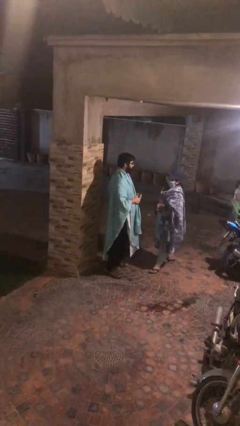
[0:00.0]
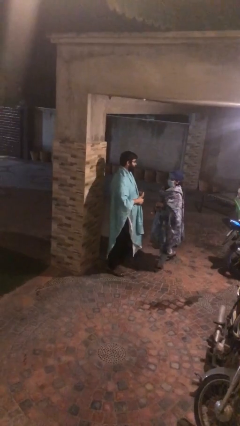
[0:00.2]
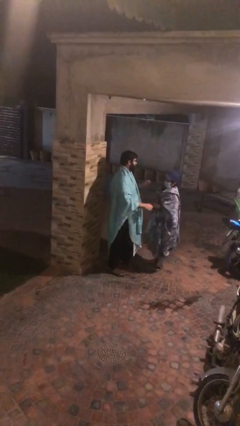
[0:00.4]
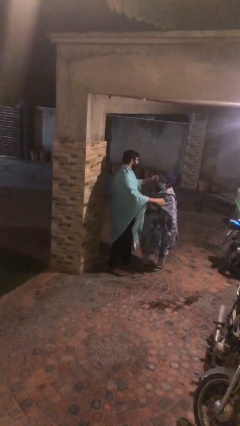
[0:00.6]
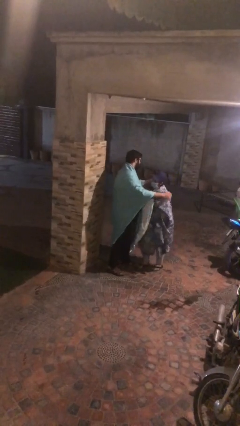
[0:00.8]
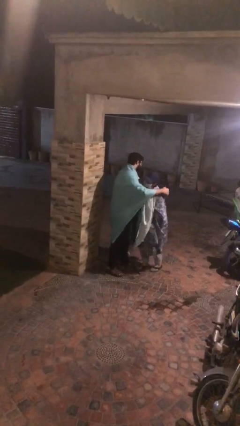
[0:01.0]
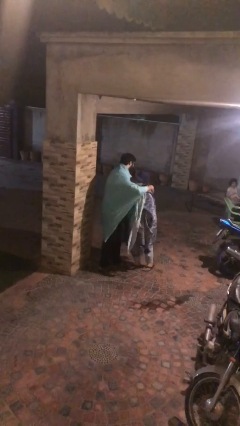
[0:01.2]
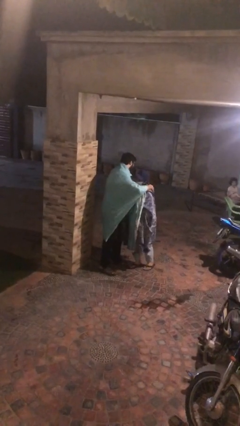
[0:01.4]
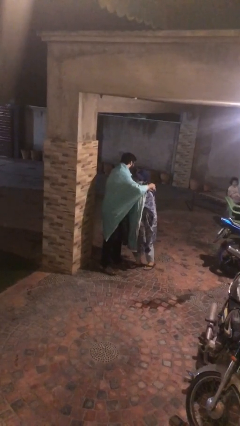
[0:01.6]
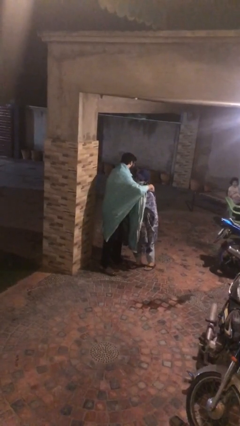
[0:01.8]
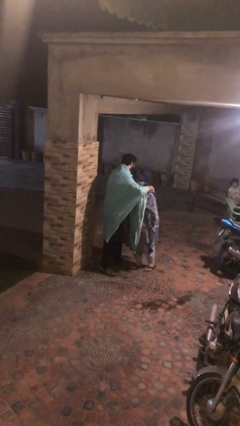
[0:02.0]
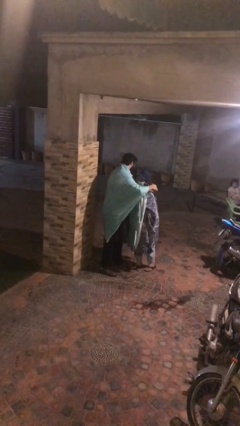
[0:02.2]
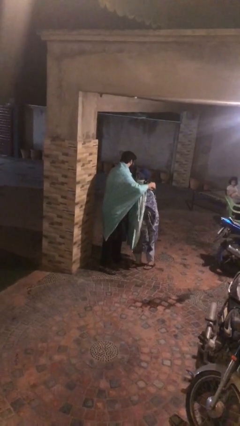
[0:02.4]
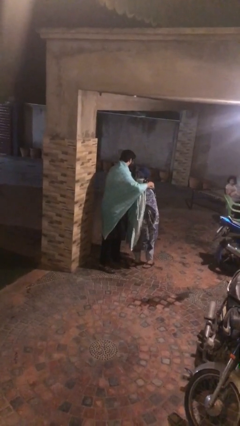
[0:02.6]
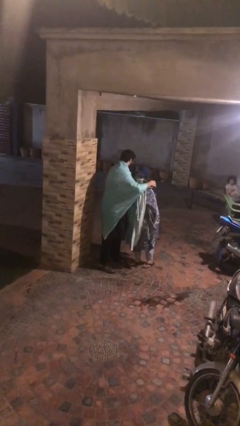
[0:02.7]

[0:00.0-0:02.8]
person embraces person

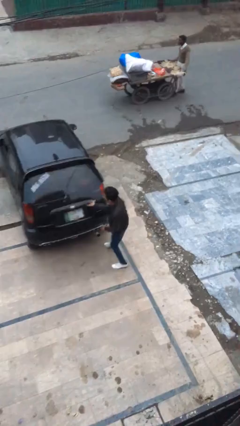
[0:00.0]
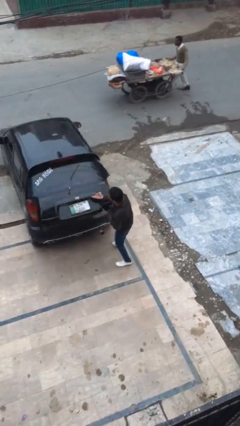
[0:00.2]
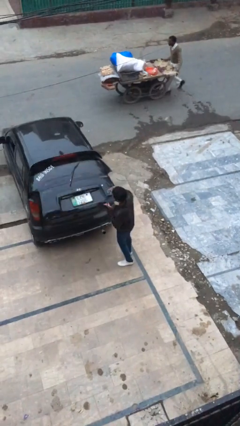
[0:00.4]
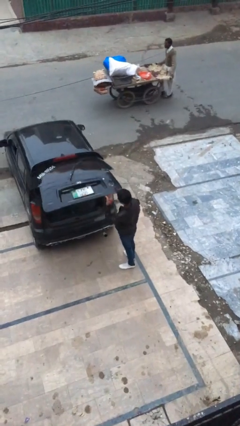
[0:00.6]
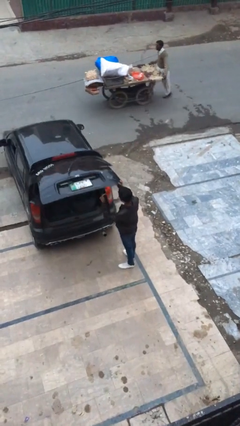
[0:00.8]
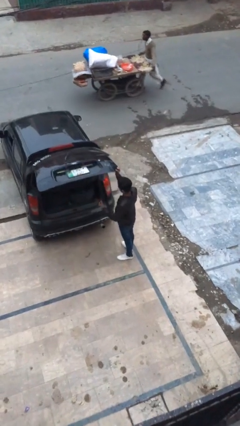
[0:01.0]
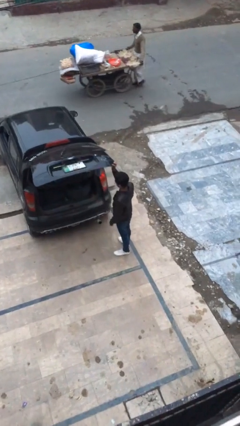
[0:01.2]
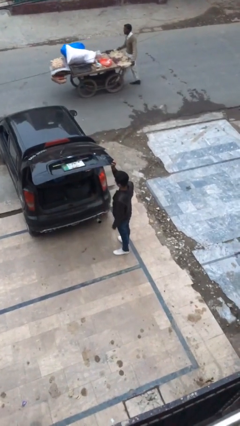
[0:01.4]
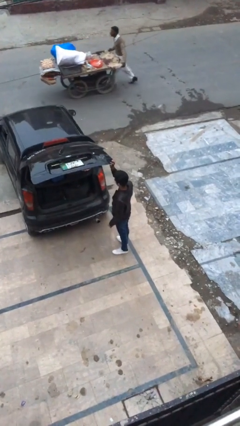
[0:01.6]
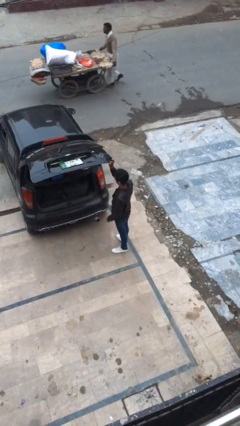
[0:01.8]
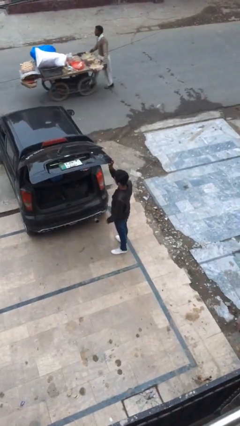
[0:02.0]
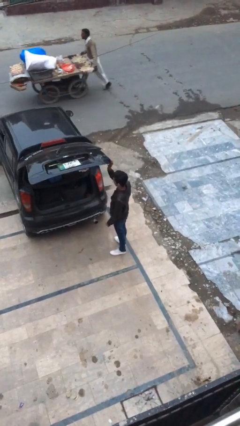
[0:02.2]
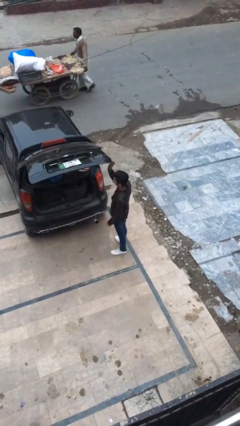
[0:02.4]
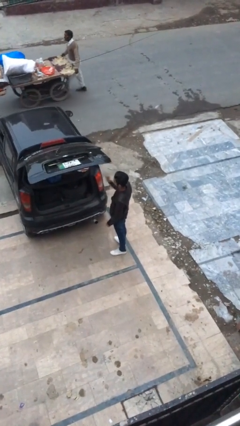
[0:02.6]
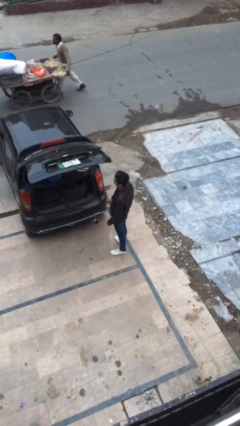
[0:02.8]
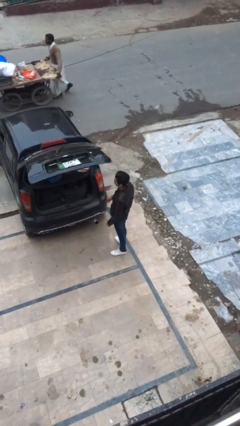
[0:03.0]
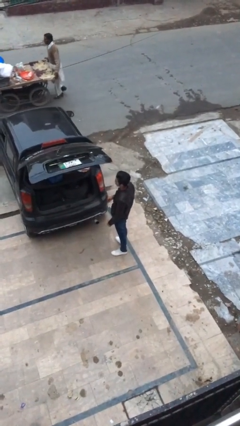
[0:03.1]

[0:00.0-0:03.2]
person opens car trunk

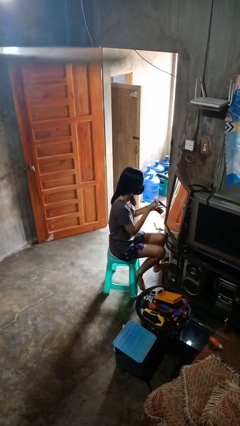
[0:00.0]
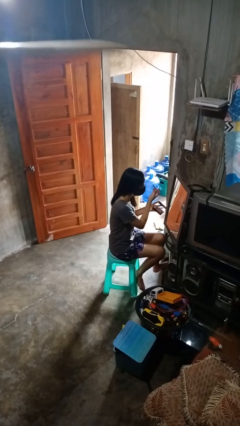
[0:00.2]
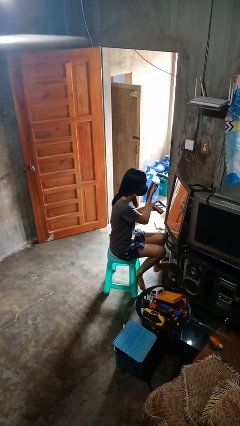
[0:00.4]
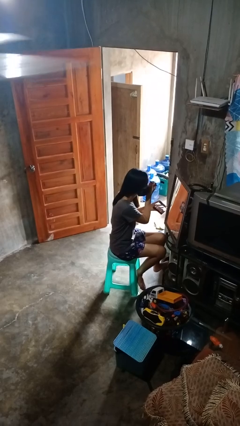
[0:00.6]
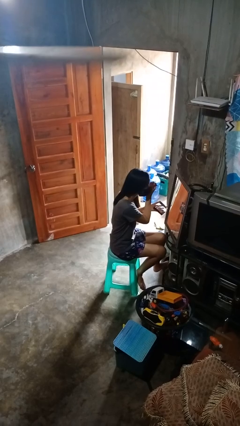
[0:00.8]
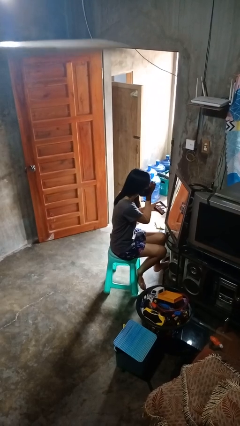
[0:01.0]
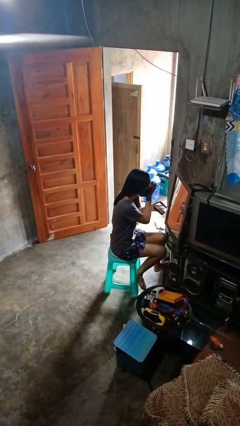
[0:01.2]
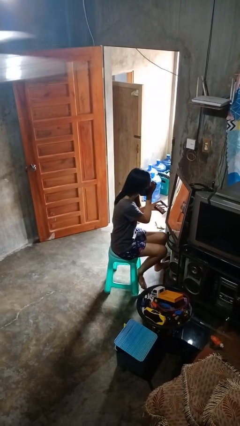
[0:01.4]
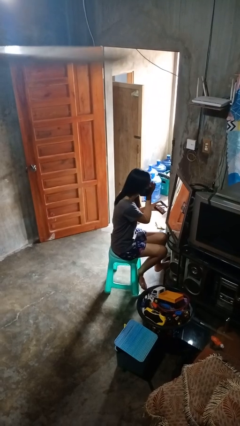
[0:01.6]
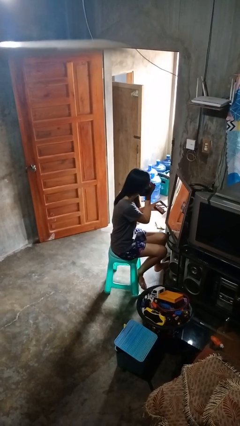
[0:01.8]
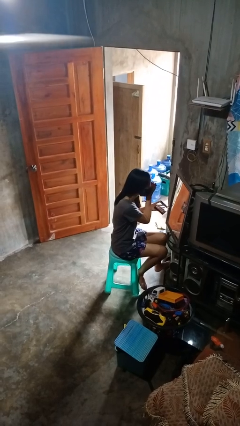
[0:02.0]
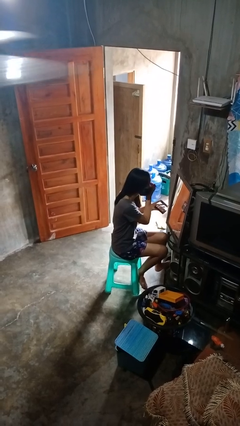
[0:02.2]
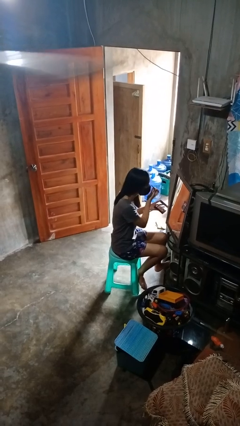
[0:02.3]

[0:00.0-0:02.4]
person applies eye makeup

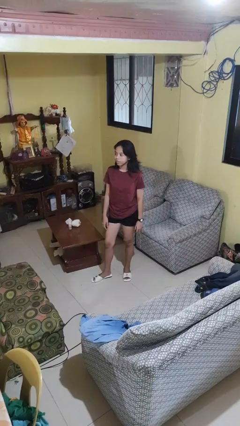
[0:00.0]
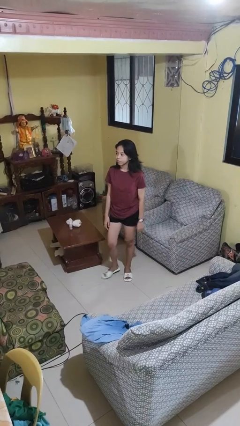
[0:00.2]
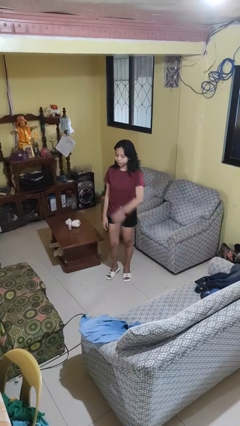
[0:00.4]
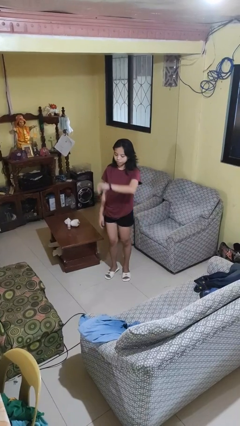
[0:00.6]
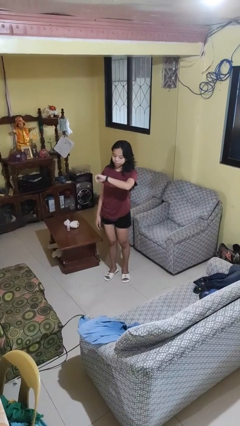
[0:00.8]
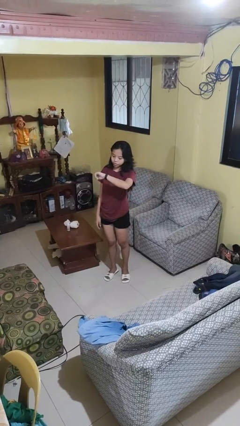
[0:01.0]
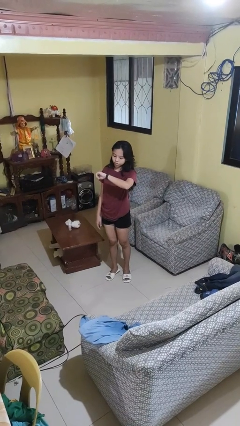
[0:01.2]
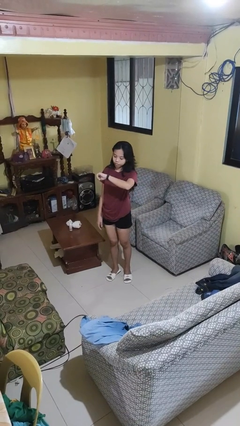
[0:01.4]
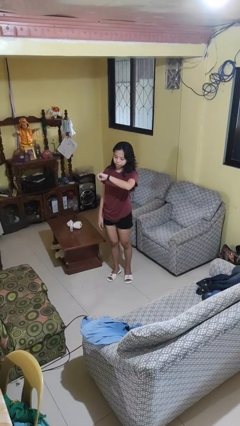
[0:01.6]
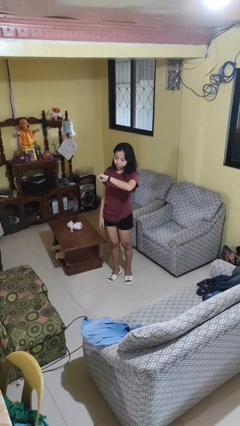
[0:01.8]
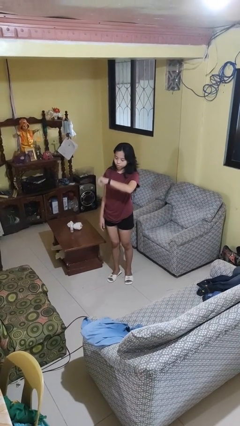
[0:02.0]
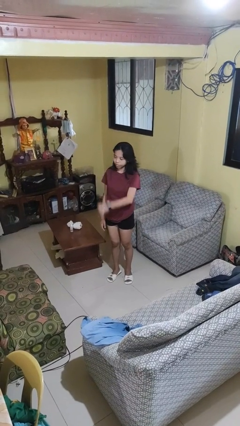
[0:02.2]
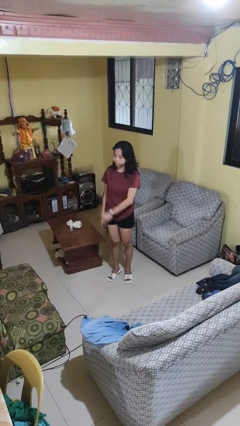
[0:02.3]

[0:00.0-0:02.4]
person looks at wristwatch

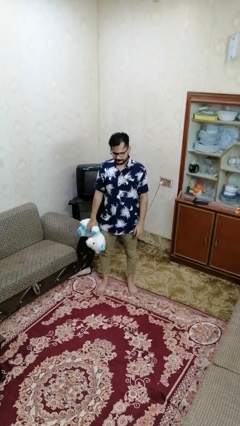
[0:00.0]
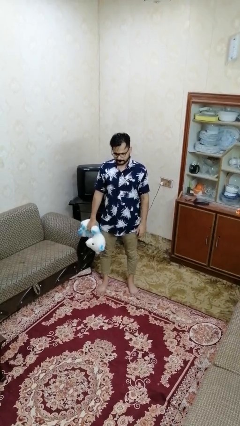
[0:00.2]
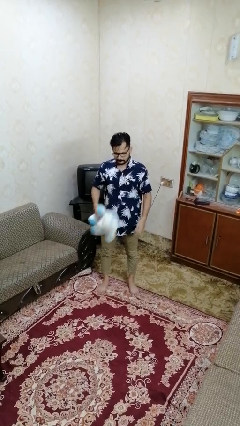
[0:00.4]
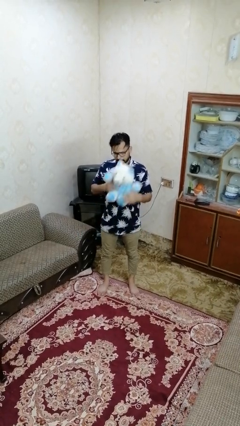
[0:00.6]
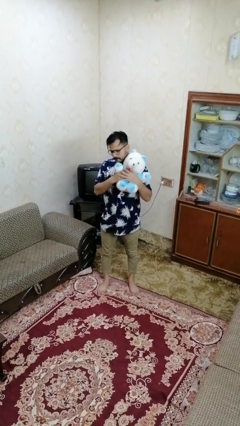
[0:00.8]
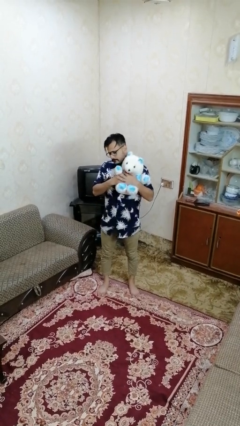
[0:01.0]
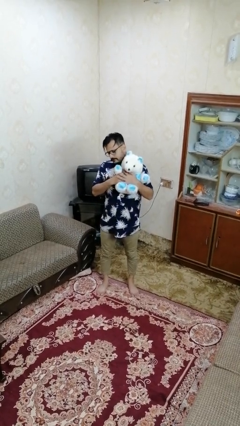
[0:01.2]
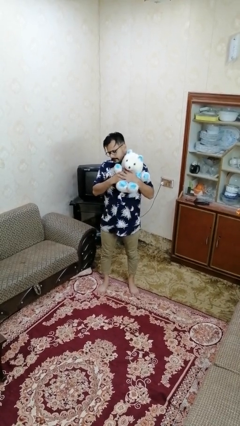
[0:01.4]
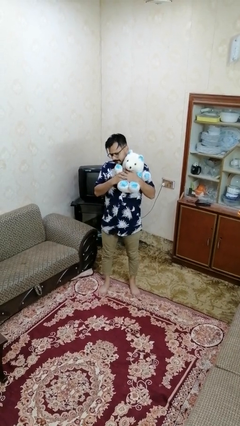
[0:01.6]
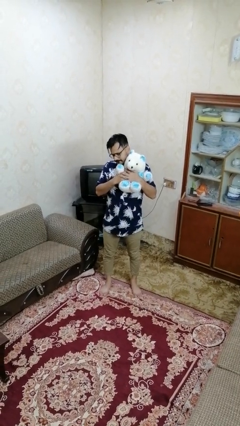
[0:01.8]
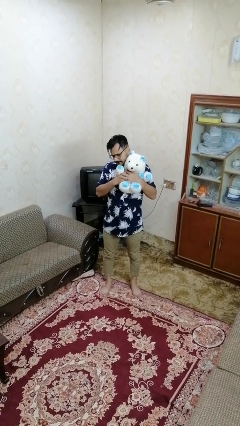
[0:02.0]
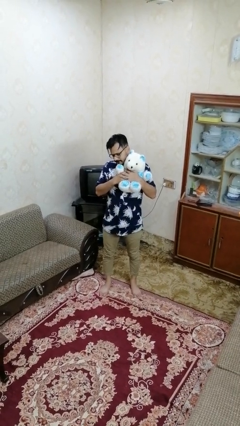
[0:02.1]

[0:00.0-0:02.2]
person hugs stuffed animal

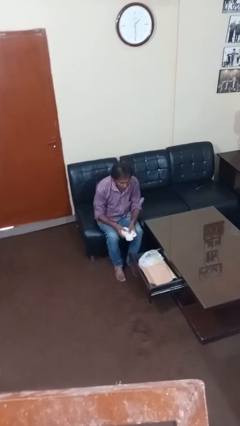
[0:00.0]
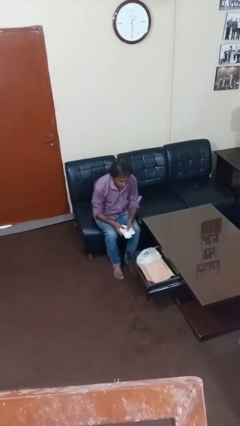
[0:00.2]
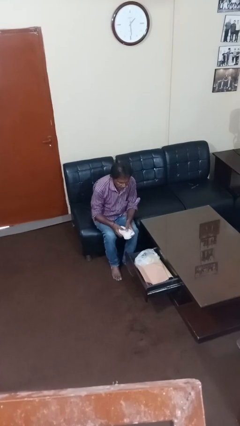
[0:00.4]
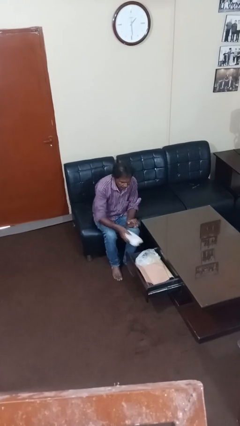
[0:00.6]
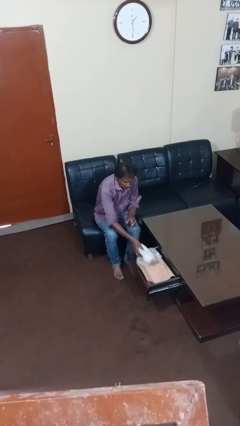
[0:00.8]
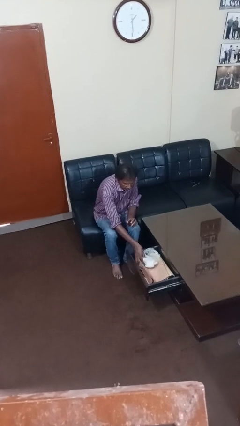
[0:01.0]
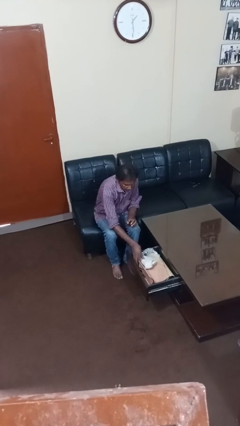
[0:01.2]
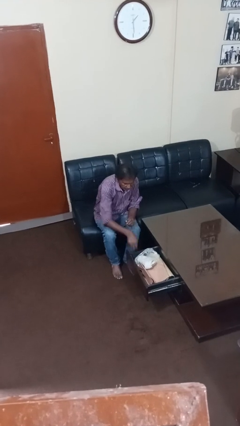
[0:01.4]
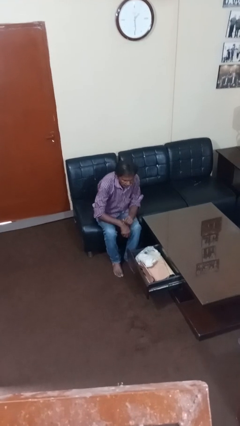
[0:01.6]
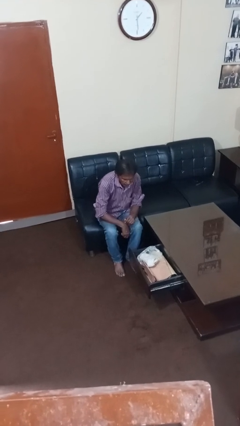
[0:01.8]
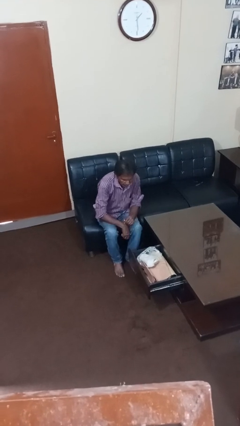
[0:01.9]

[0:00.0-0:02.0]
person puts clothes into dresser

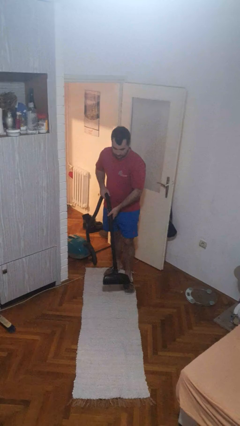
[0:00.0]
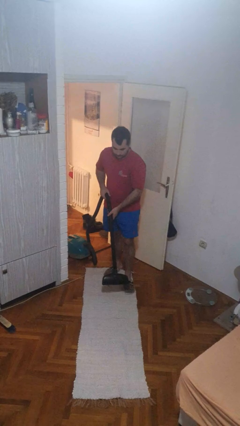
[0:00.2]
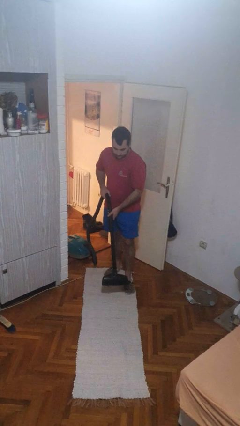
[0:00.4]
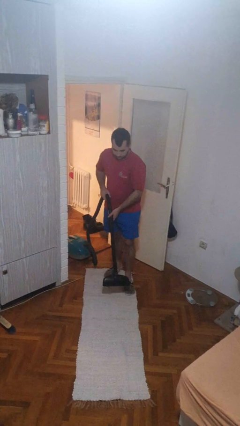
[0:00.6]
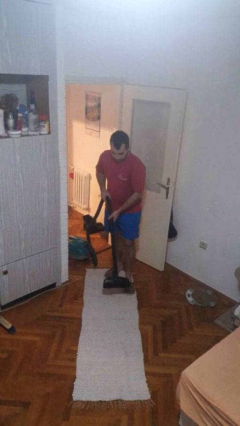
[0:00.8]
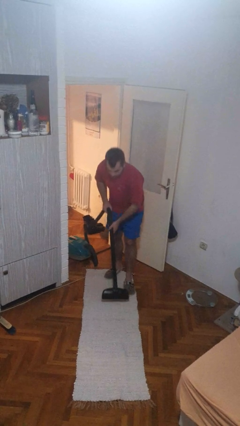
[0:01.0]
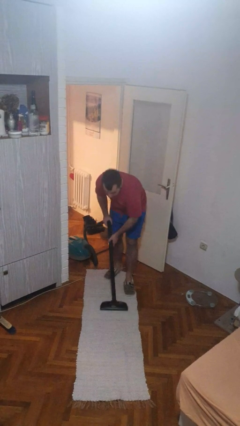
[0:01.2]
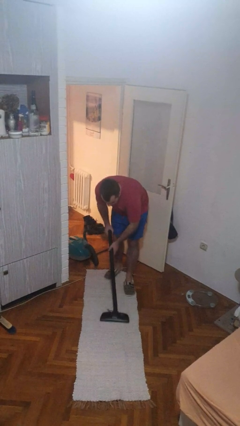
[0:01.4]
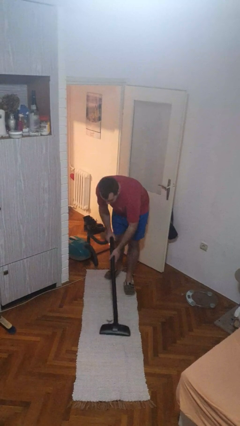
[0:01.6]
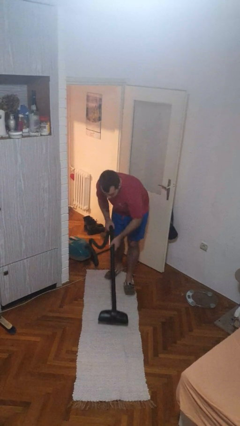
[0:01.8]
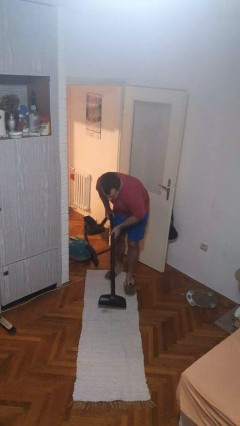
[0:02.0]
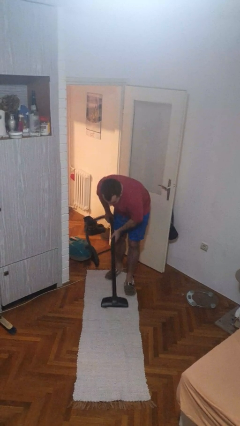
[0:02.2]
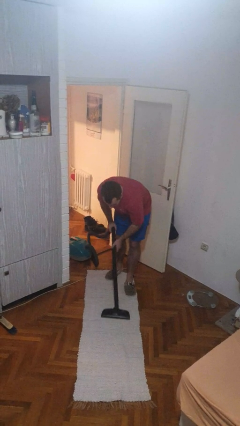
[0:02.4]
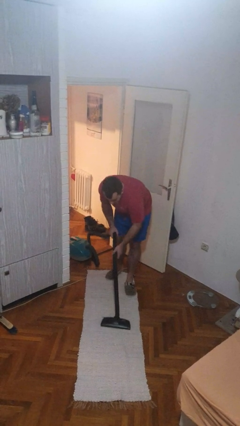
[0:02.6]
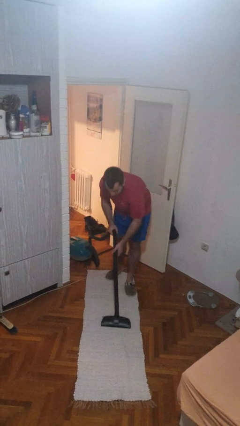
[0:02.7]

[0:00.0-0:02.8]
person vacuums carpet
